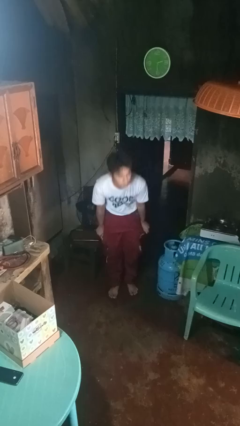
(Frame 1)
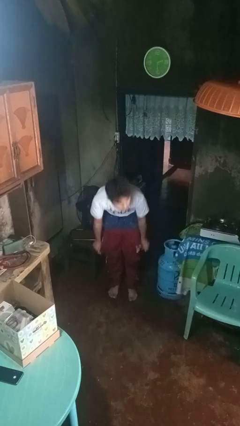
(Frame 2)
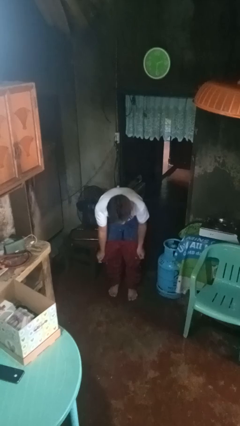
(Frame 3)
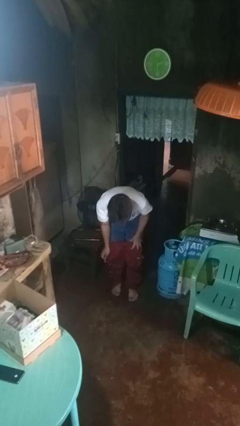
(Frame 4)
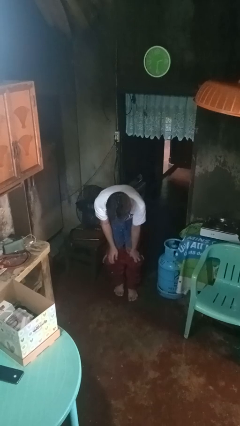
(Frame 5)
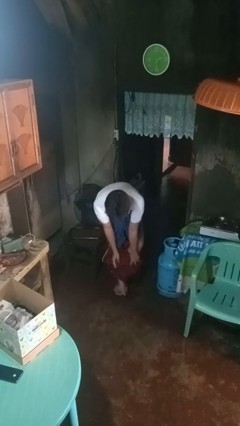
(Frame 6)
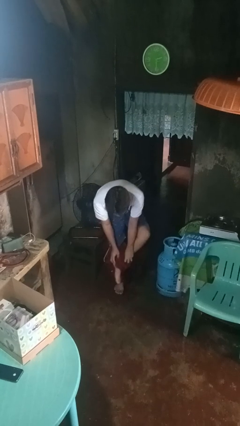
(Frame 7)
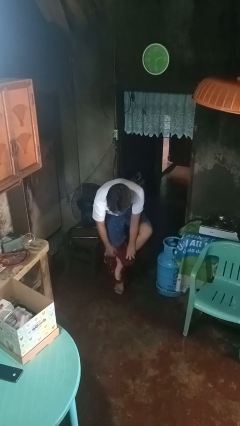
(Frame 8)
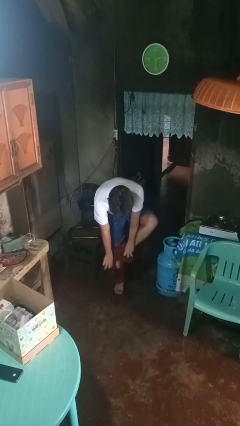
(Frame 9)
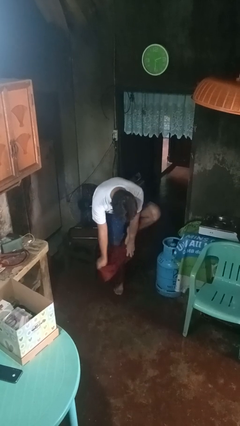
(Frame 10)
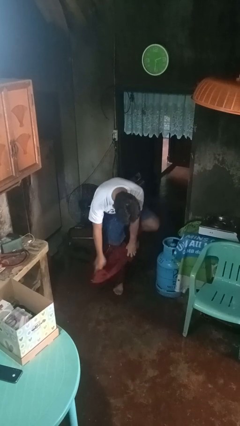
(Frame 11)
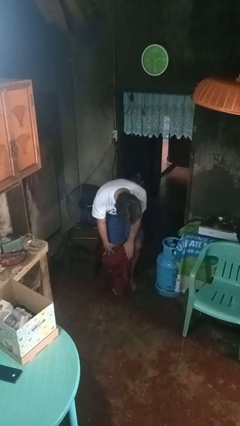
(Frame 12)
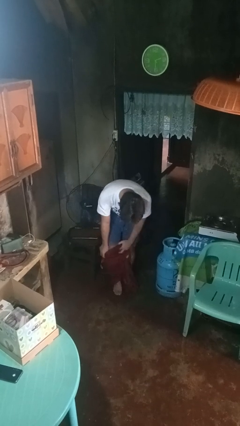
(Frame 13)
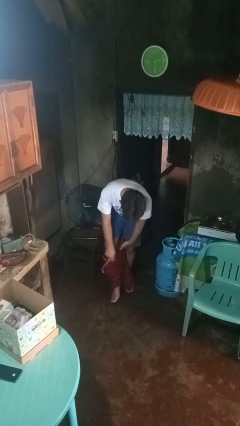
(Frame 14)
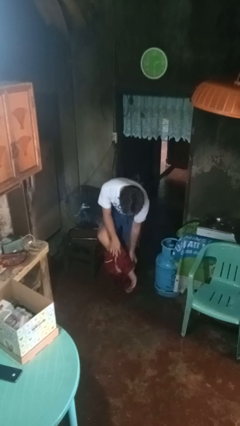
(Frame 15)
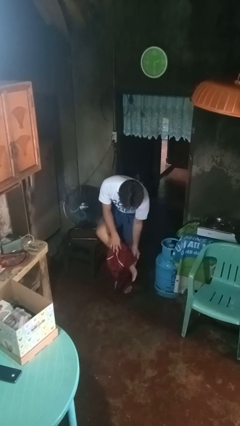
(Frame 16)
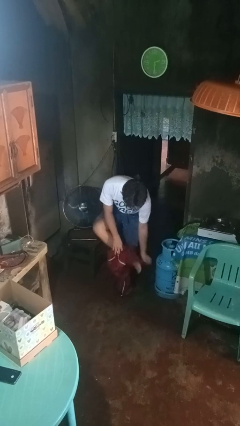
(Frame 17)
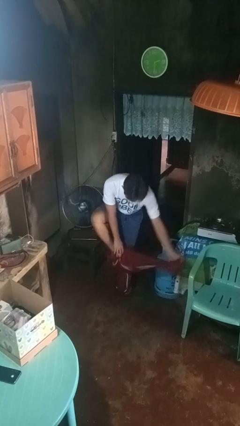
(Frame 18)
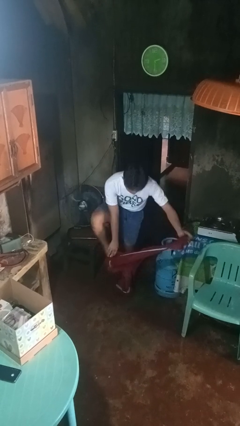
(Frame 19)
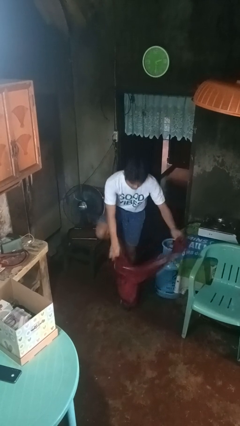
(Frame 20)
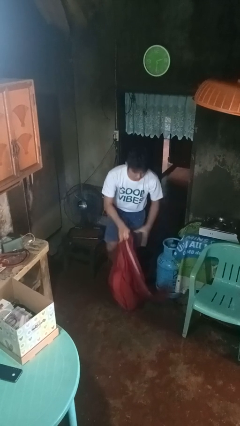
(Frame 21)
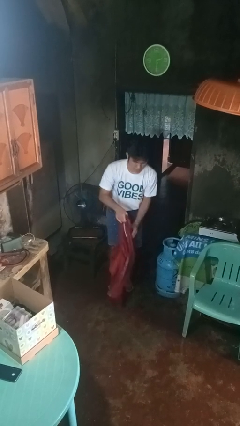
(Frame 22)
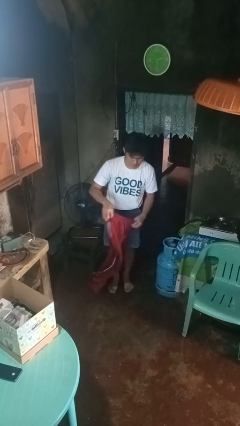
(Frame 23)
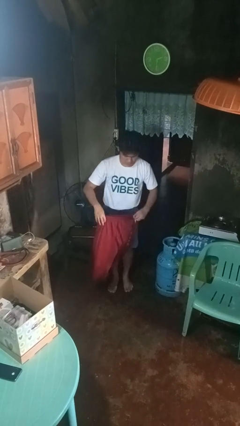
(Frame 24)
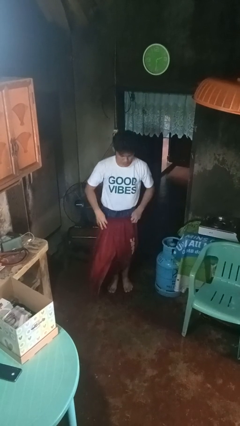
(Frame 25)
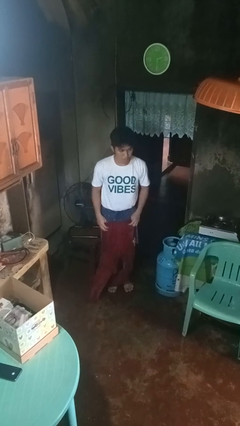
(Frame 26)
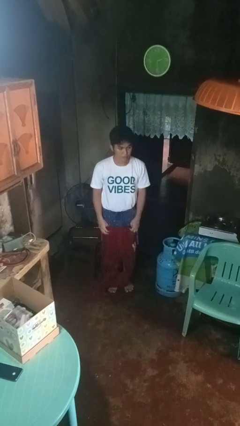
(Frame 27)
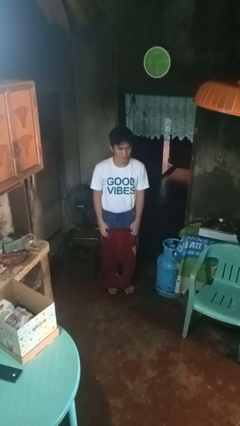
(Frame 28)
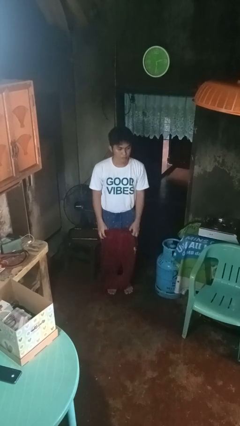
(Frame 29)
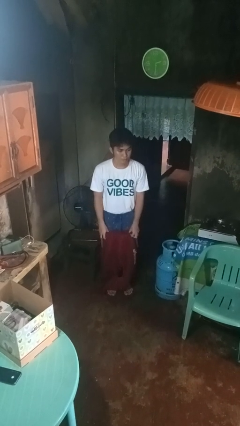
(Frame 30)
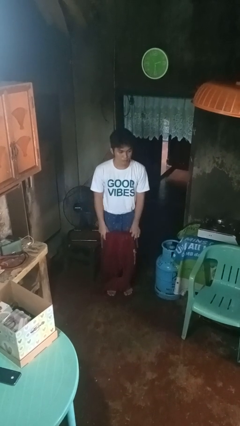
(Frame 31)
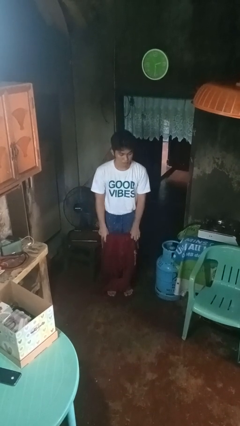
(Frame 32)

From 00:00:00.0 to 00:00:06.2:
person takes off pants

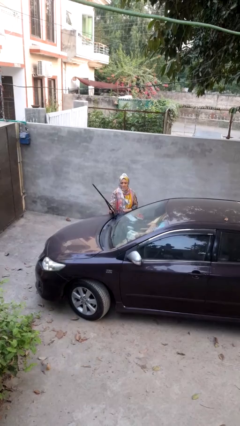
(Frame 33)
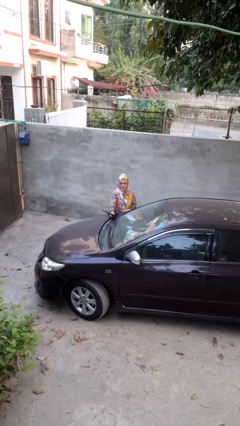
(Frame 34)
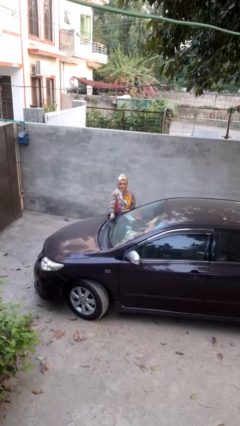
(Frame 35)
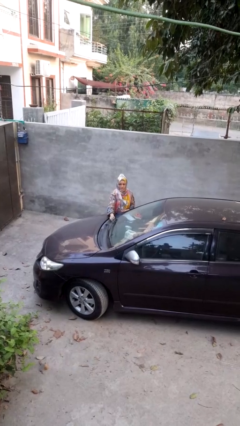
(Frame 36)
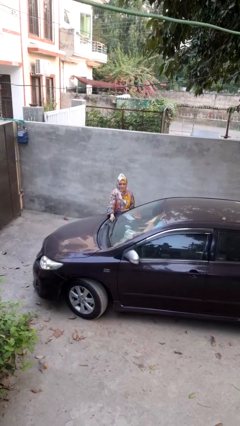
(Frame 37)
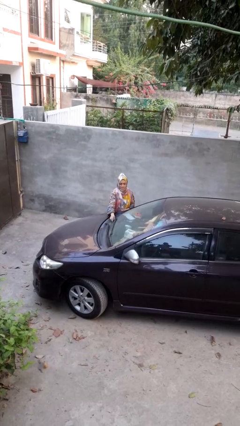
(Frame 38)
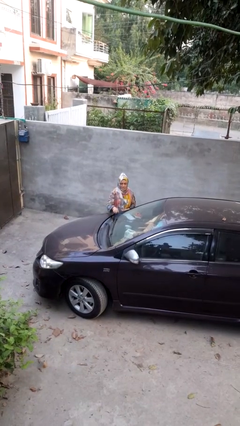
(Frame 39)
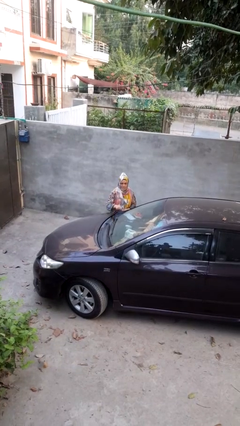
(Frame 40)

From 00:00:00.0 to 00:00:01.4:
person flips down car wipers

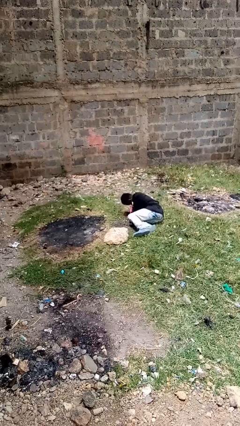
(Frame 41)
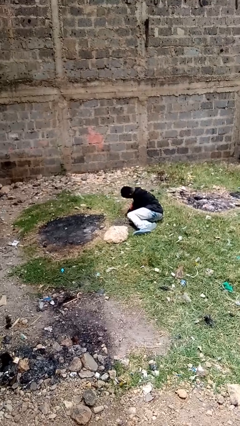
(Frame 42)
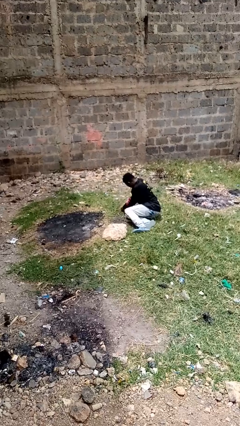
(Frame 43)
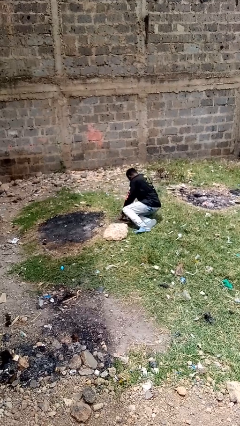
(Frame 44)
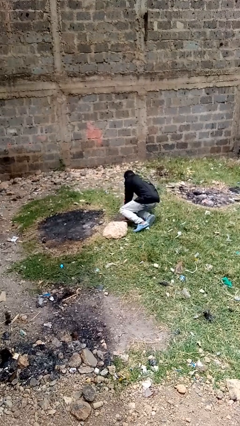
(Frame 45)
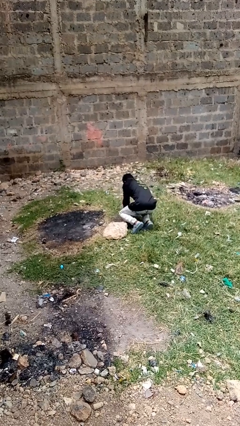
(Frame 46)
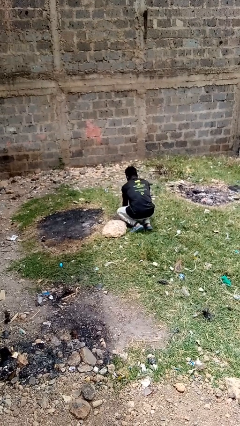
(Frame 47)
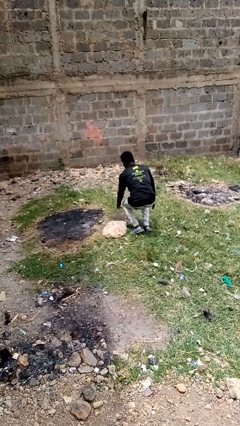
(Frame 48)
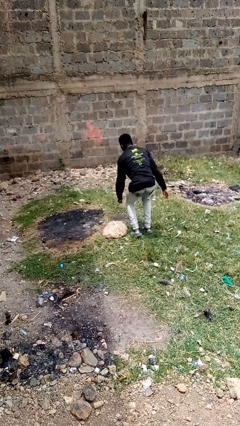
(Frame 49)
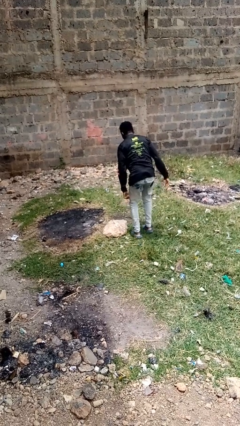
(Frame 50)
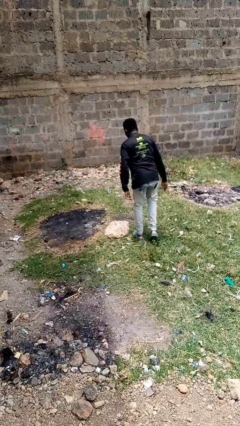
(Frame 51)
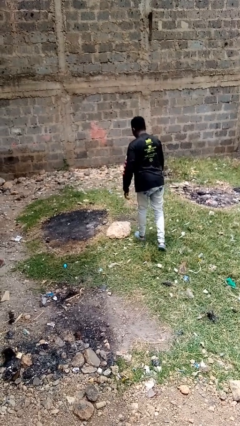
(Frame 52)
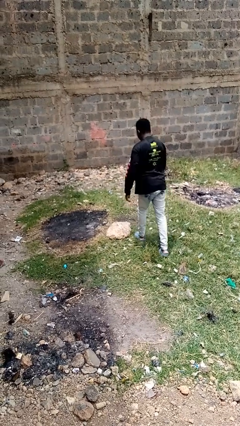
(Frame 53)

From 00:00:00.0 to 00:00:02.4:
person stands up from floor

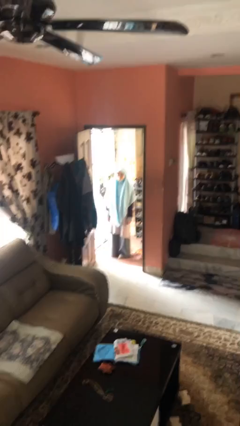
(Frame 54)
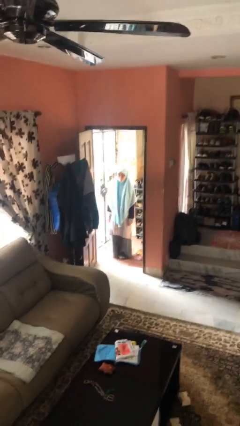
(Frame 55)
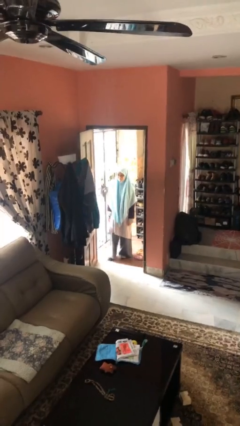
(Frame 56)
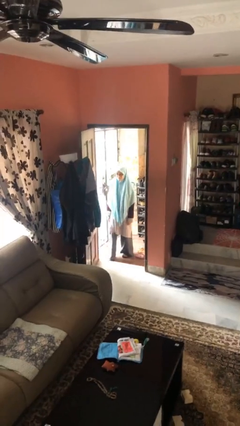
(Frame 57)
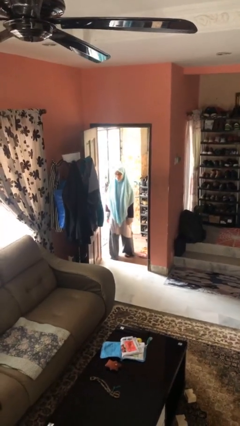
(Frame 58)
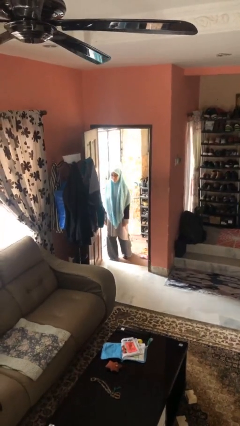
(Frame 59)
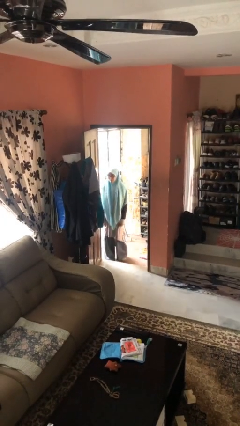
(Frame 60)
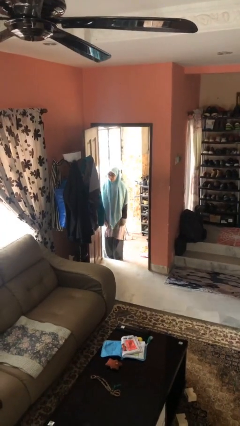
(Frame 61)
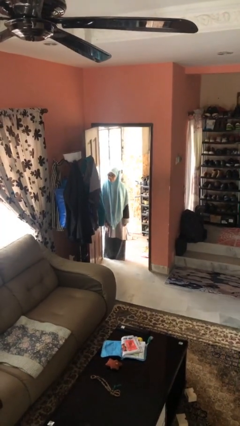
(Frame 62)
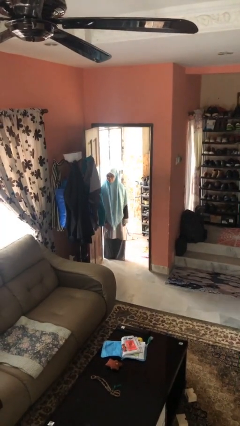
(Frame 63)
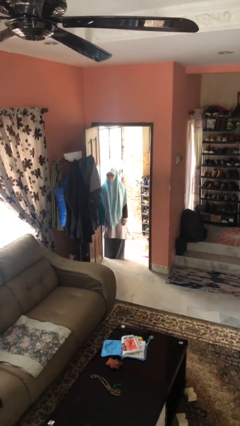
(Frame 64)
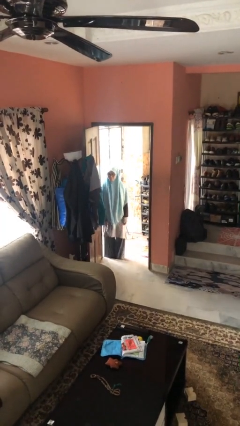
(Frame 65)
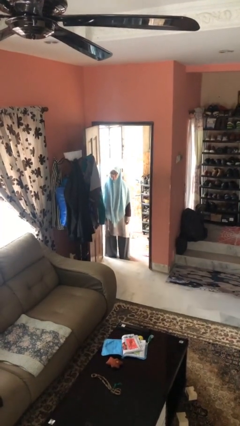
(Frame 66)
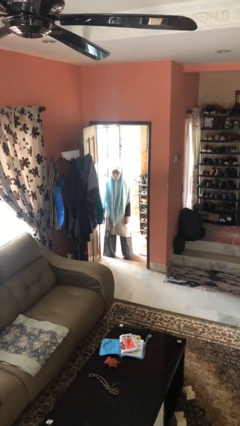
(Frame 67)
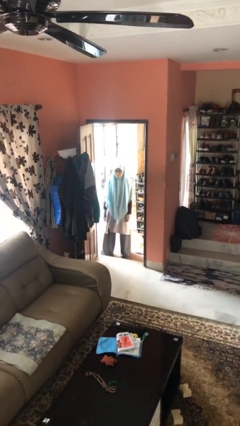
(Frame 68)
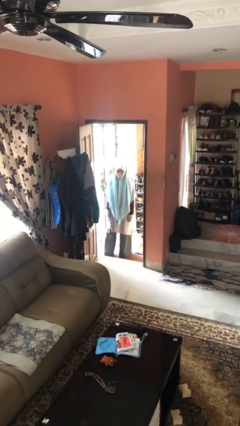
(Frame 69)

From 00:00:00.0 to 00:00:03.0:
person bumps into wall

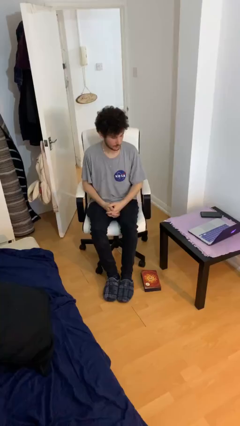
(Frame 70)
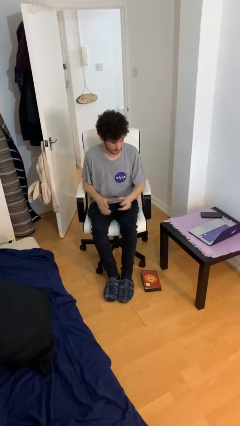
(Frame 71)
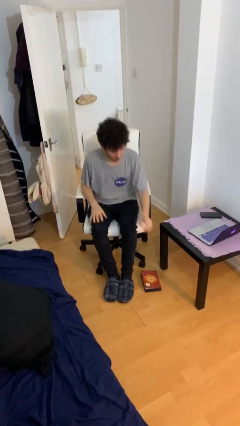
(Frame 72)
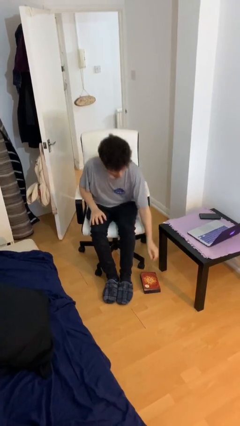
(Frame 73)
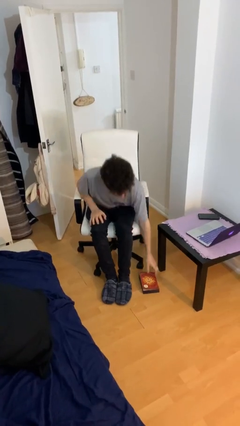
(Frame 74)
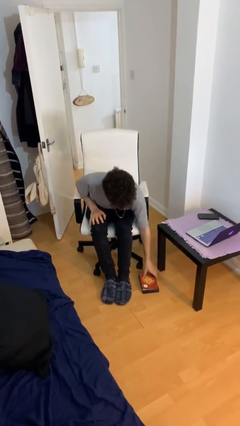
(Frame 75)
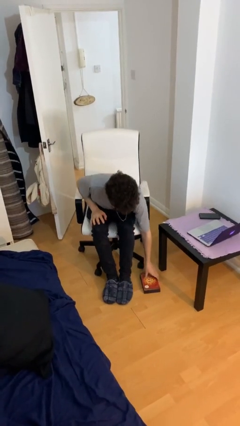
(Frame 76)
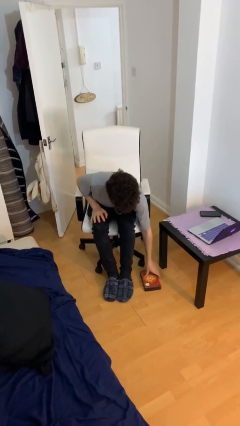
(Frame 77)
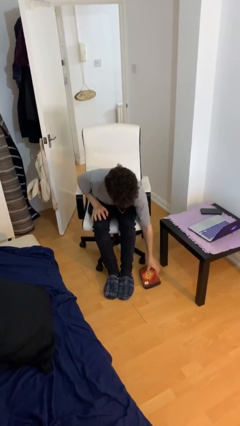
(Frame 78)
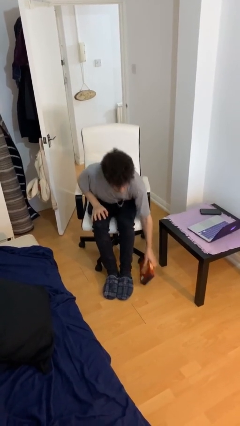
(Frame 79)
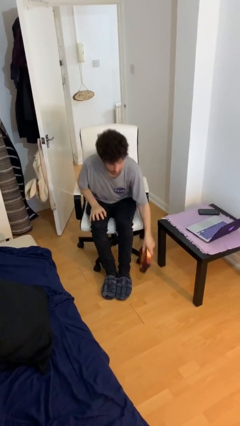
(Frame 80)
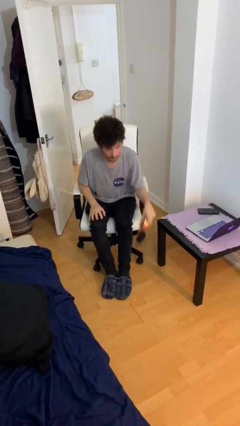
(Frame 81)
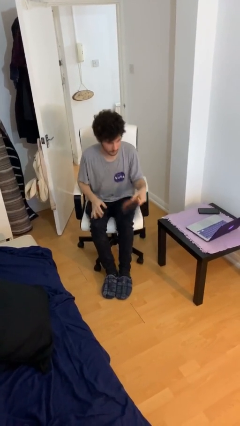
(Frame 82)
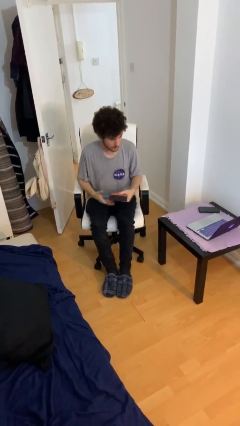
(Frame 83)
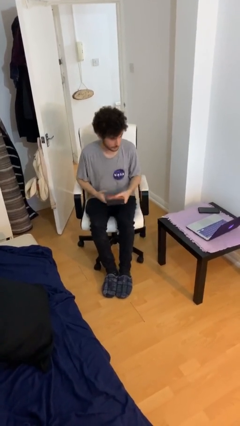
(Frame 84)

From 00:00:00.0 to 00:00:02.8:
person picks up object from floor

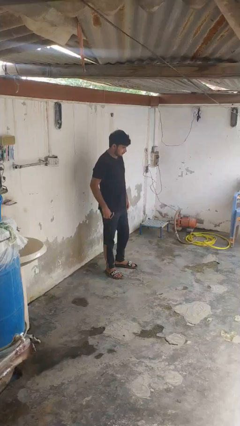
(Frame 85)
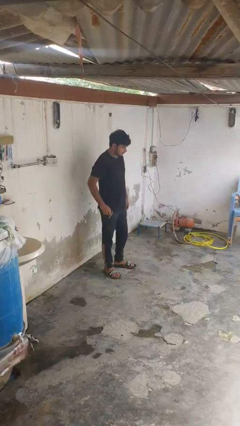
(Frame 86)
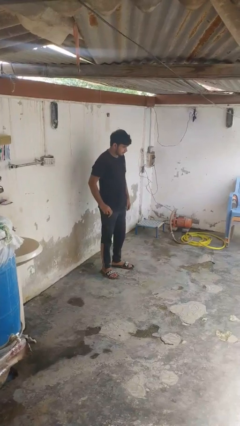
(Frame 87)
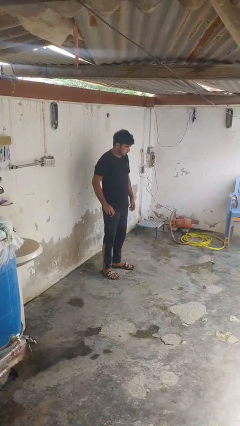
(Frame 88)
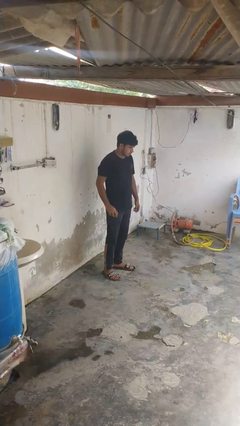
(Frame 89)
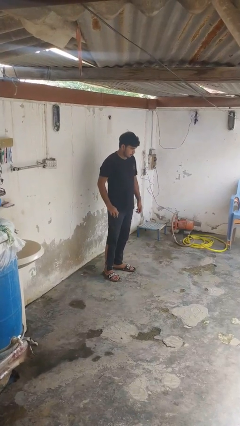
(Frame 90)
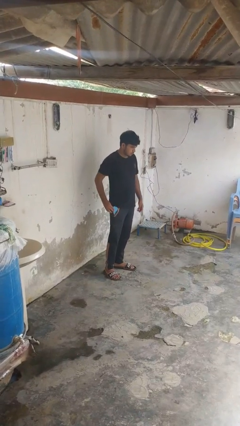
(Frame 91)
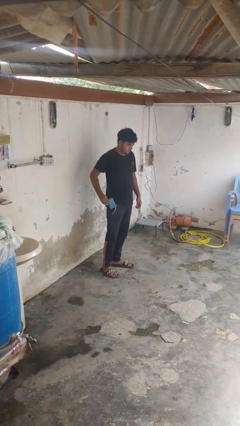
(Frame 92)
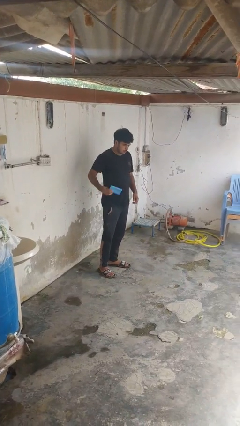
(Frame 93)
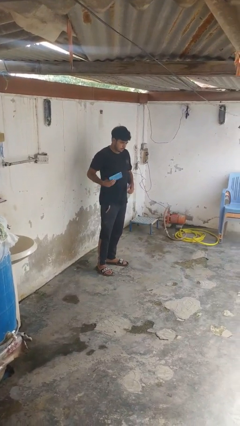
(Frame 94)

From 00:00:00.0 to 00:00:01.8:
person takes phone from pocket
